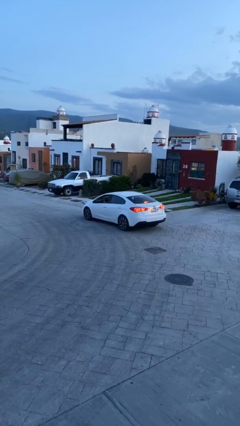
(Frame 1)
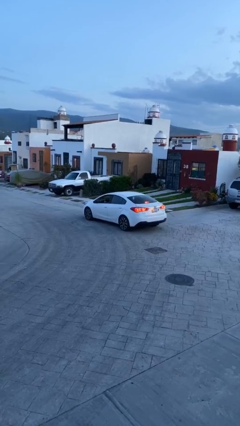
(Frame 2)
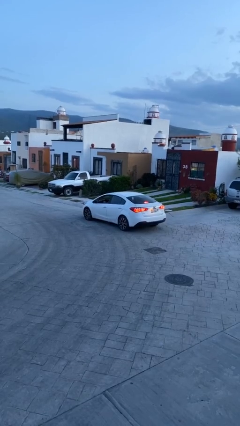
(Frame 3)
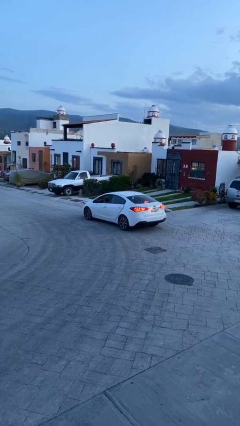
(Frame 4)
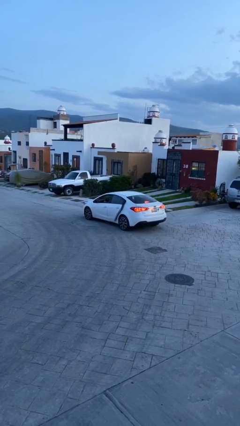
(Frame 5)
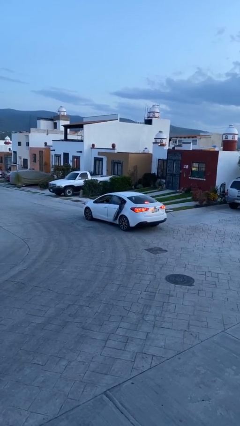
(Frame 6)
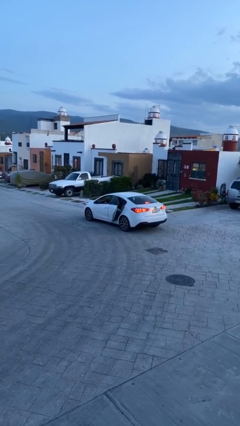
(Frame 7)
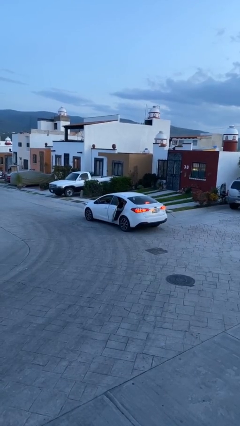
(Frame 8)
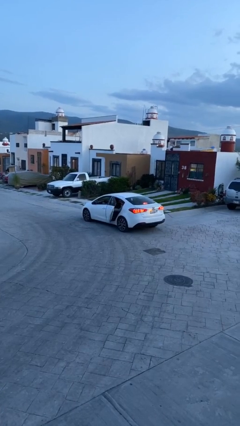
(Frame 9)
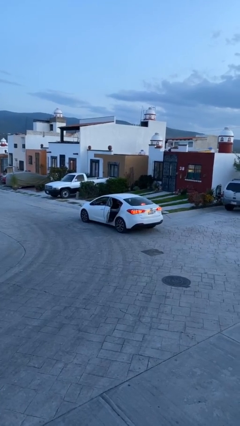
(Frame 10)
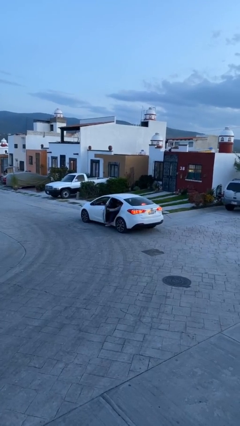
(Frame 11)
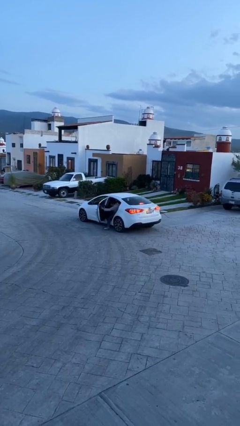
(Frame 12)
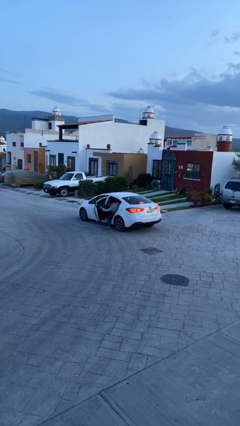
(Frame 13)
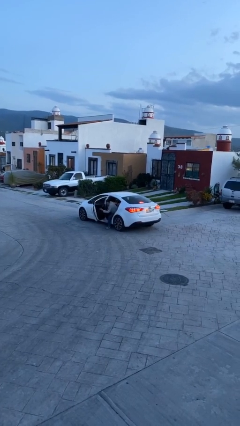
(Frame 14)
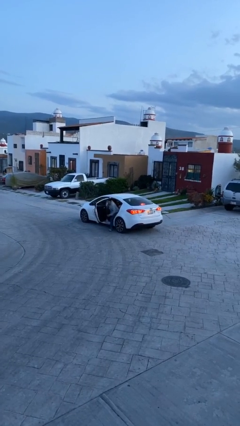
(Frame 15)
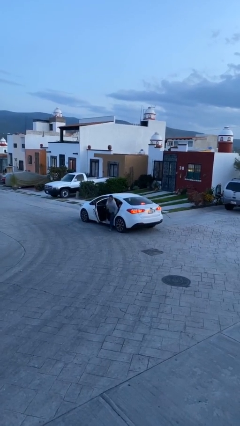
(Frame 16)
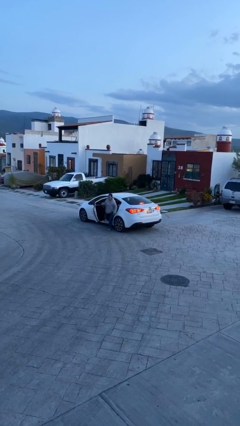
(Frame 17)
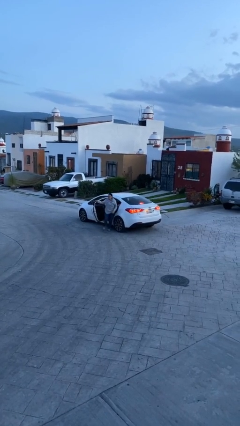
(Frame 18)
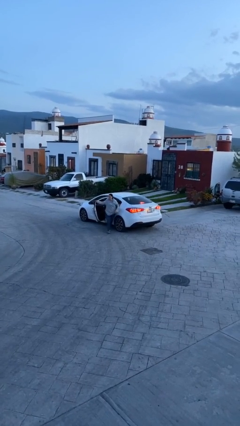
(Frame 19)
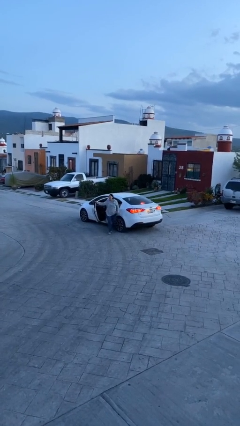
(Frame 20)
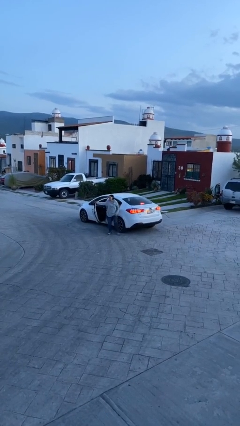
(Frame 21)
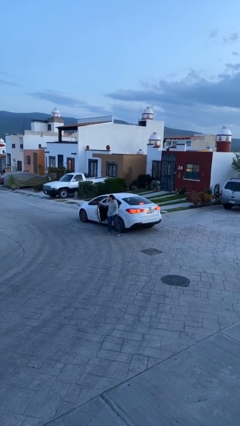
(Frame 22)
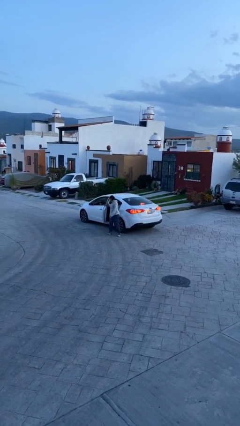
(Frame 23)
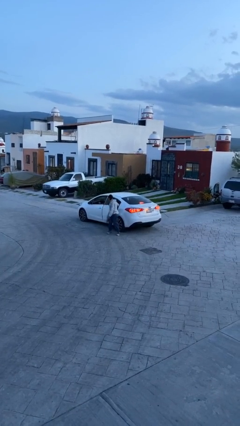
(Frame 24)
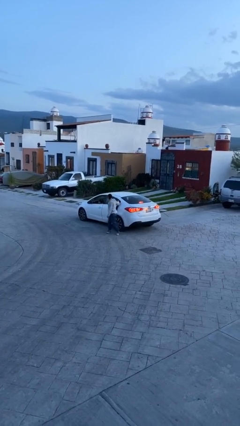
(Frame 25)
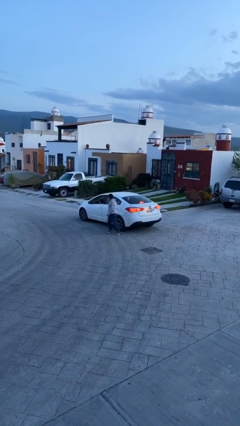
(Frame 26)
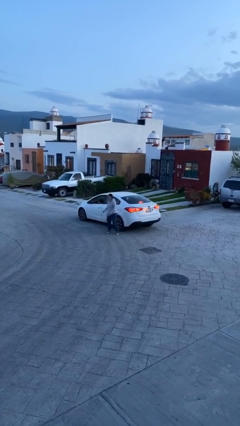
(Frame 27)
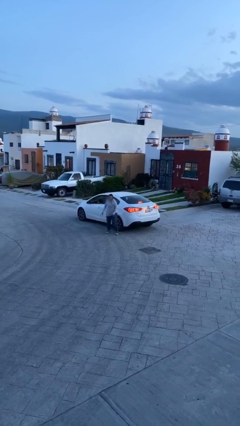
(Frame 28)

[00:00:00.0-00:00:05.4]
car drops off person

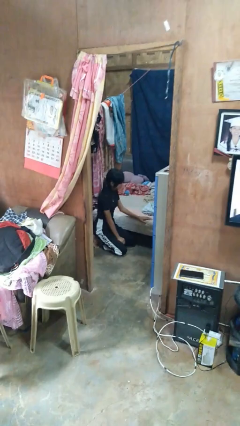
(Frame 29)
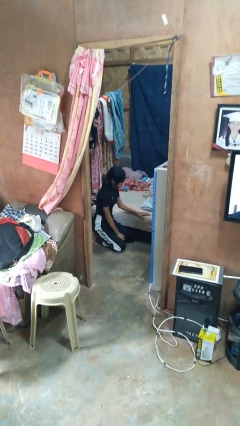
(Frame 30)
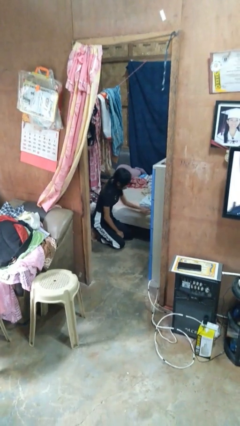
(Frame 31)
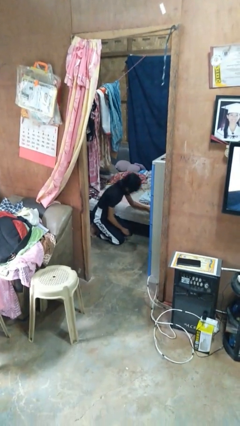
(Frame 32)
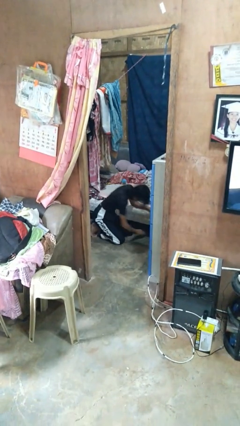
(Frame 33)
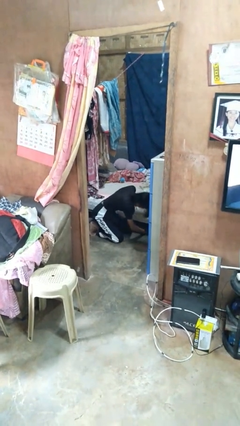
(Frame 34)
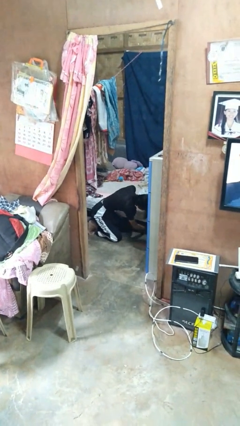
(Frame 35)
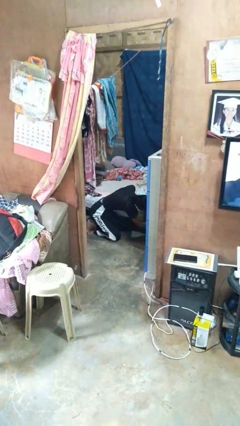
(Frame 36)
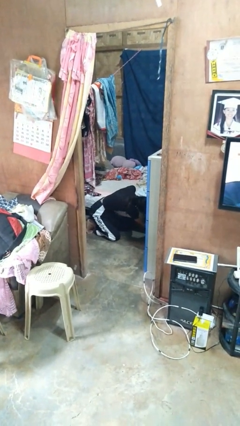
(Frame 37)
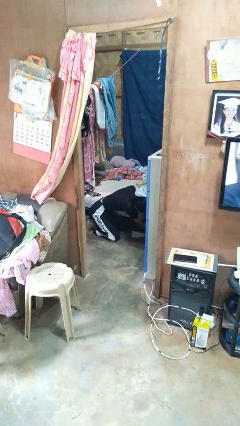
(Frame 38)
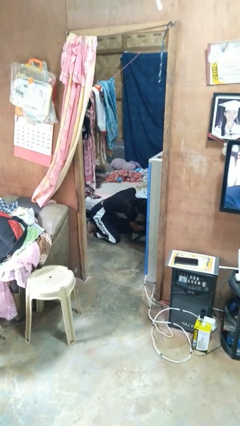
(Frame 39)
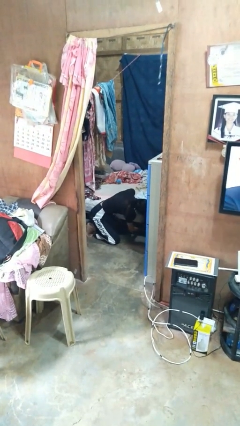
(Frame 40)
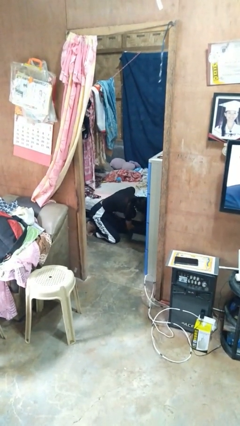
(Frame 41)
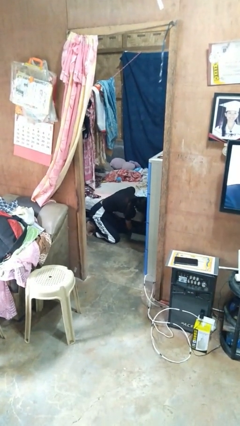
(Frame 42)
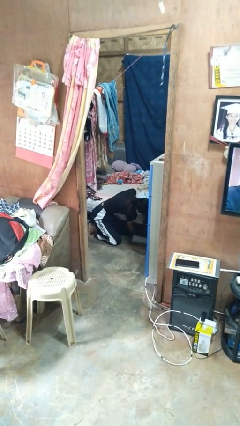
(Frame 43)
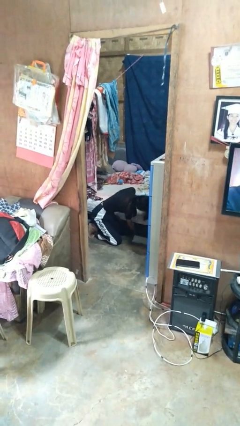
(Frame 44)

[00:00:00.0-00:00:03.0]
person searches under bed

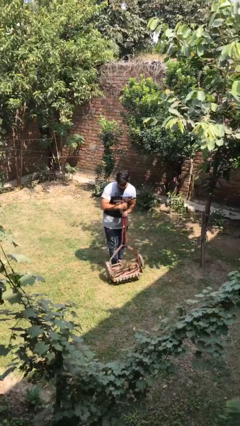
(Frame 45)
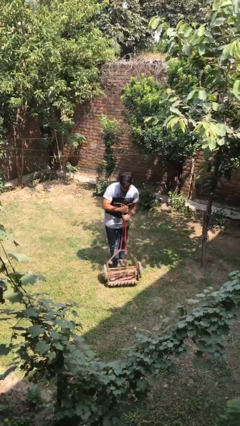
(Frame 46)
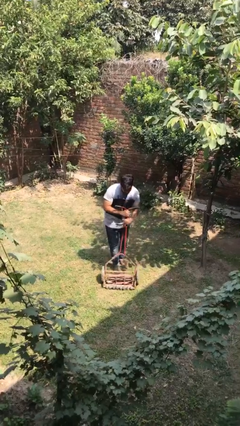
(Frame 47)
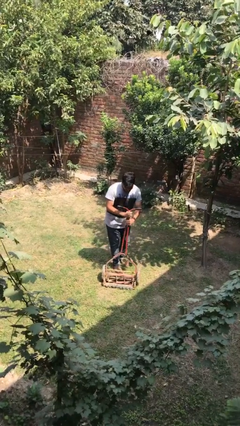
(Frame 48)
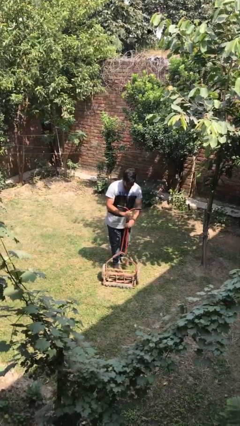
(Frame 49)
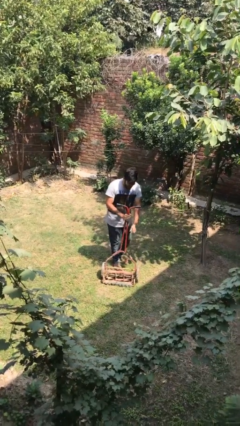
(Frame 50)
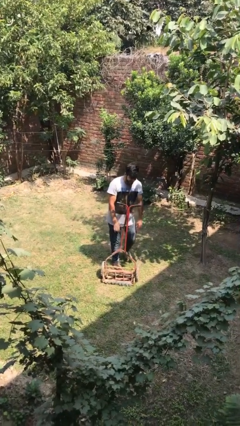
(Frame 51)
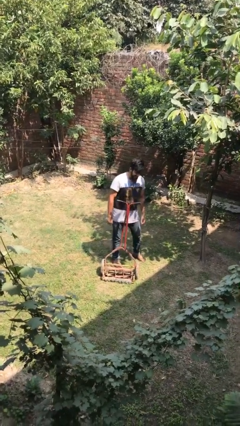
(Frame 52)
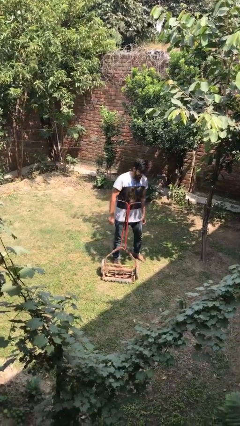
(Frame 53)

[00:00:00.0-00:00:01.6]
person puts down object on floor

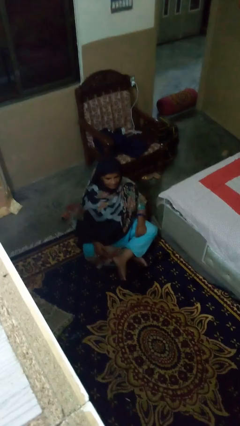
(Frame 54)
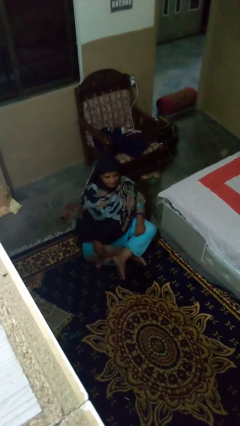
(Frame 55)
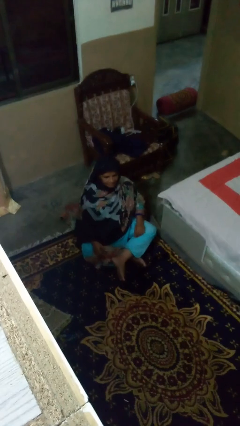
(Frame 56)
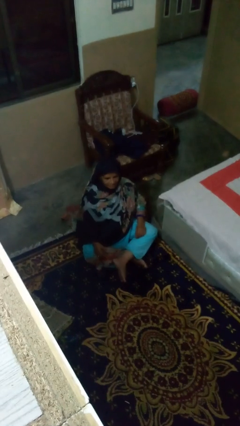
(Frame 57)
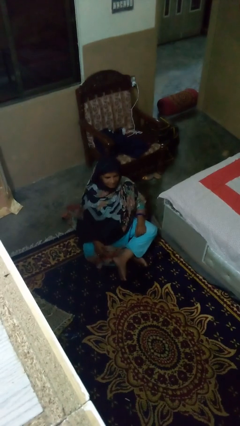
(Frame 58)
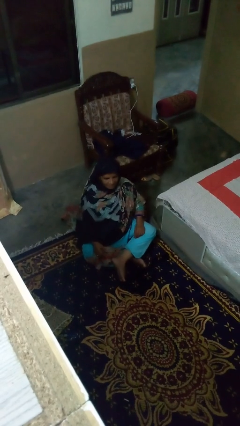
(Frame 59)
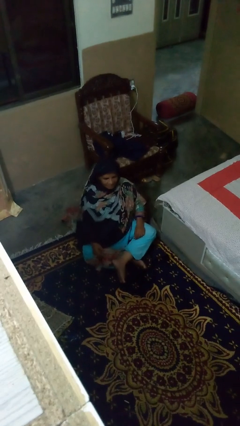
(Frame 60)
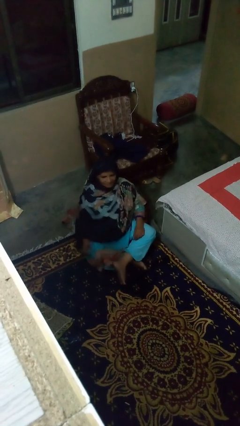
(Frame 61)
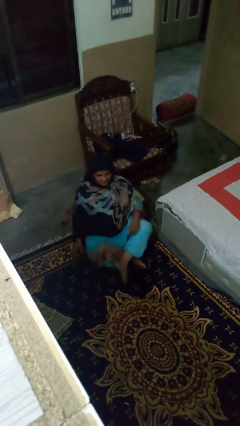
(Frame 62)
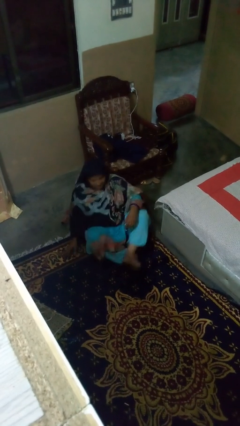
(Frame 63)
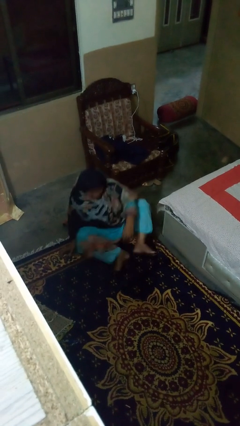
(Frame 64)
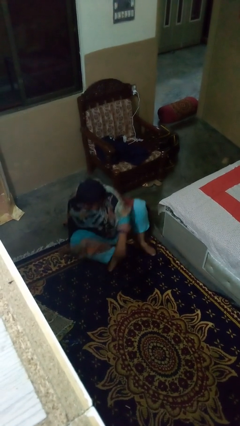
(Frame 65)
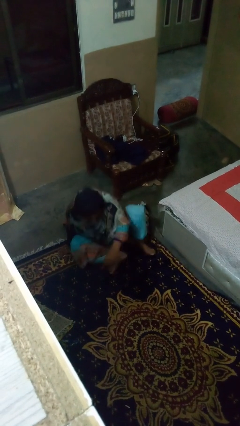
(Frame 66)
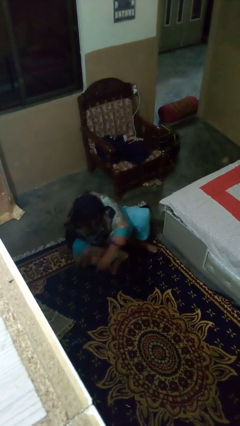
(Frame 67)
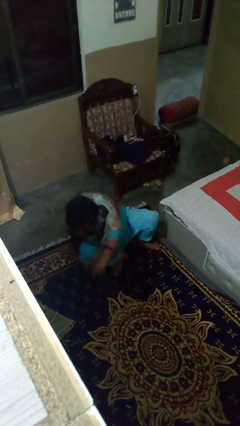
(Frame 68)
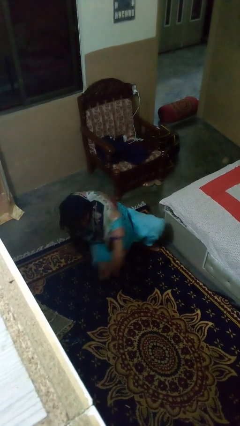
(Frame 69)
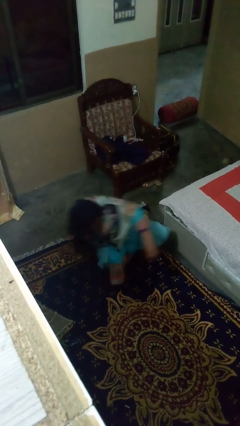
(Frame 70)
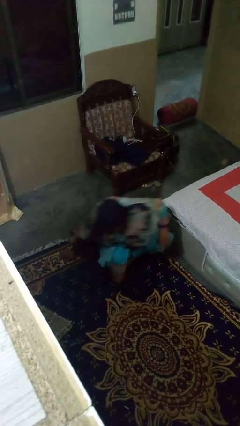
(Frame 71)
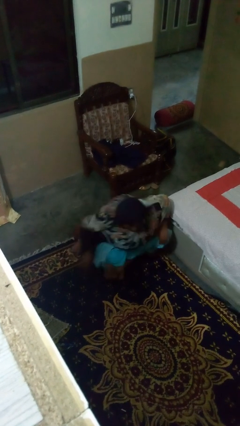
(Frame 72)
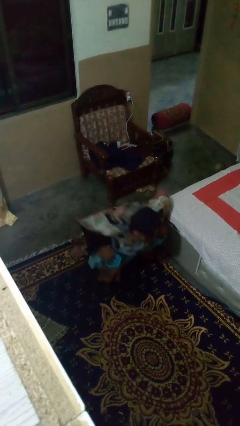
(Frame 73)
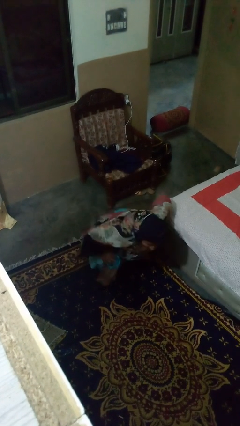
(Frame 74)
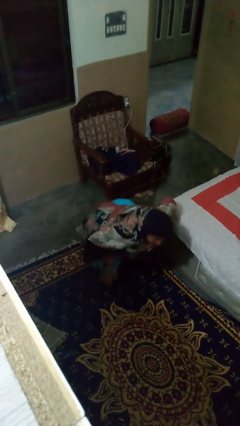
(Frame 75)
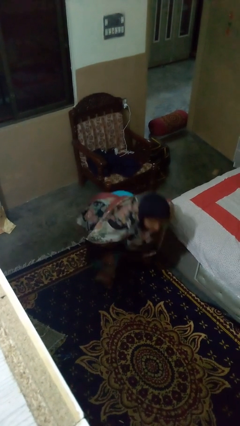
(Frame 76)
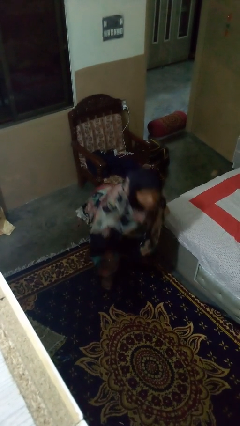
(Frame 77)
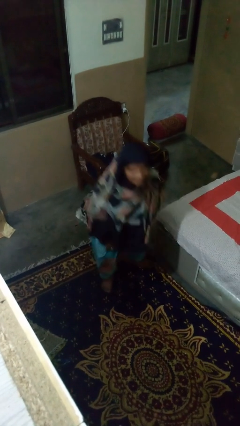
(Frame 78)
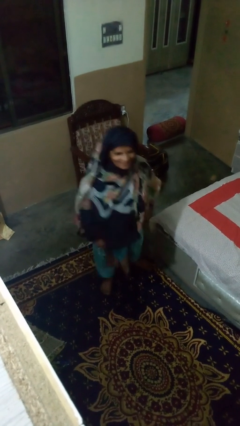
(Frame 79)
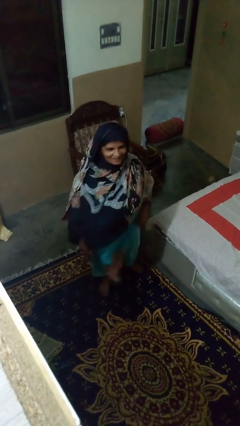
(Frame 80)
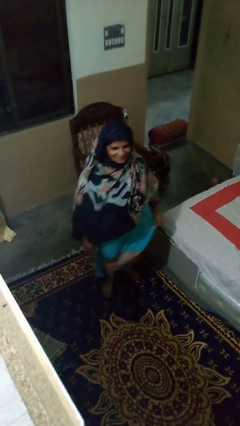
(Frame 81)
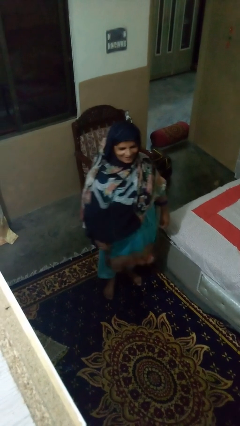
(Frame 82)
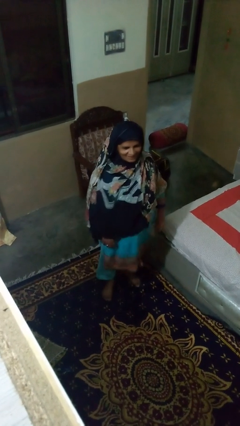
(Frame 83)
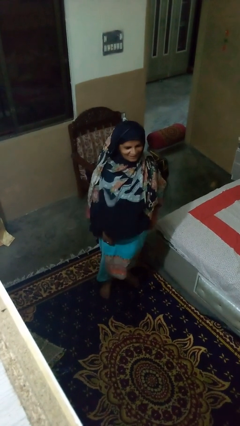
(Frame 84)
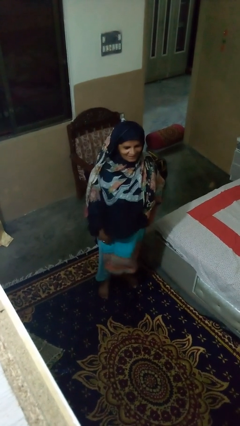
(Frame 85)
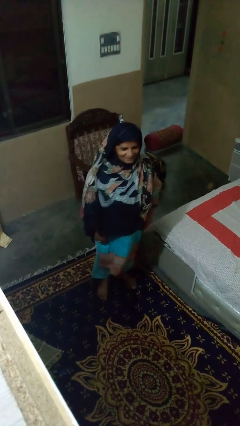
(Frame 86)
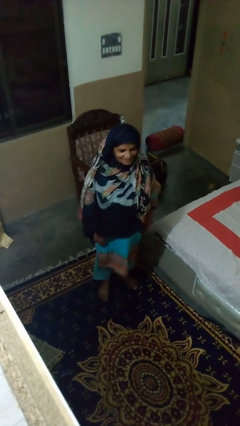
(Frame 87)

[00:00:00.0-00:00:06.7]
person stands up from floor

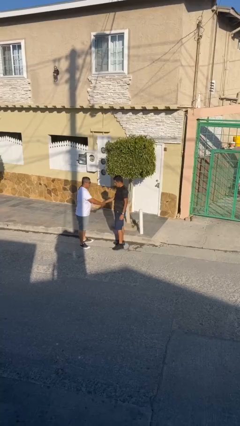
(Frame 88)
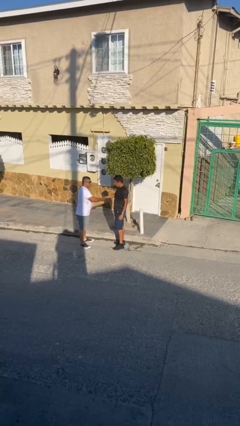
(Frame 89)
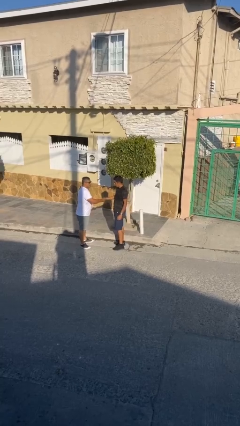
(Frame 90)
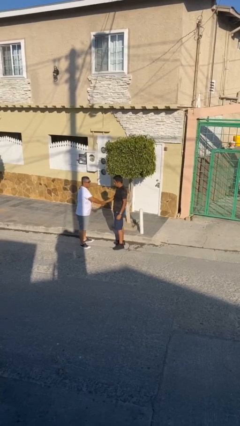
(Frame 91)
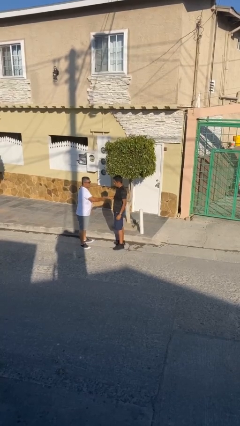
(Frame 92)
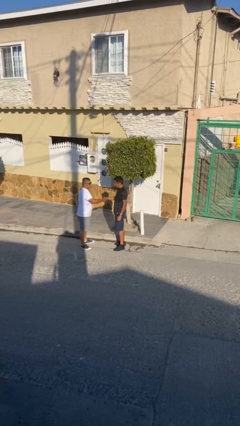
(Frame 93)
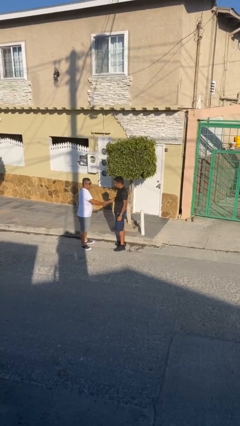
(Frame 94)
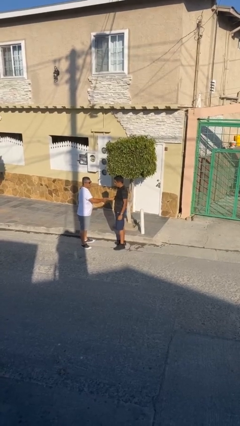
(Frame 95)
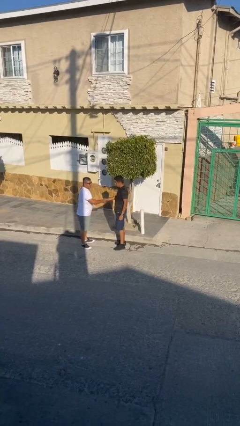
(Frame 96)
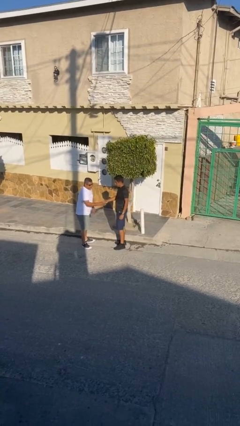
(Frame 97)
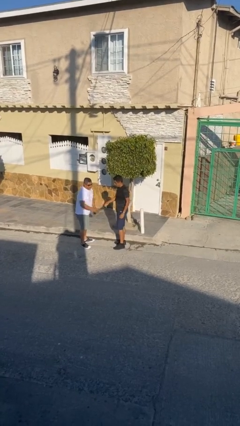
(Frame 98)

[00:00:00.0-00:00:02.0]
person shakes hand
